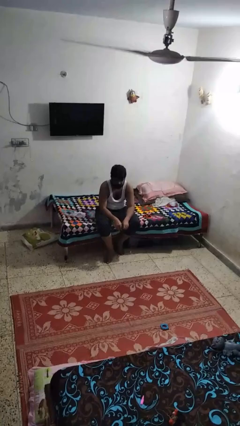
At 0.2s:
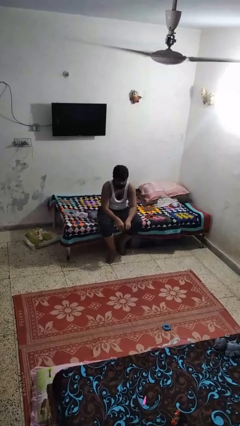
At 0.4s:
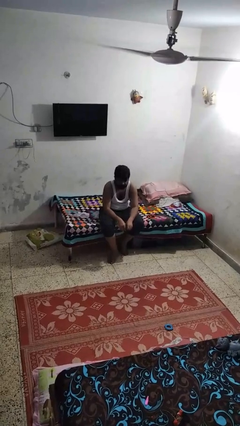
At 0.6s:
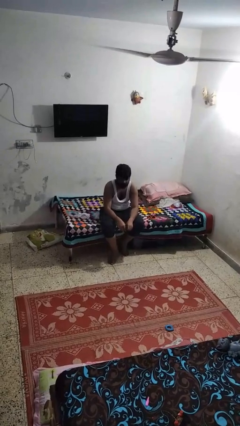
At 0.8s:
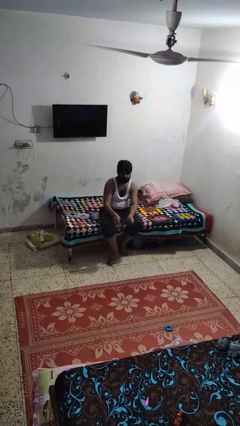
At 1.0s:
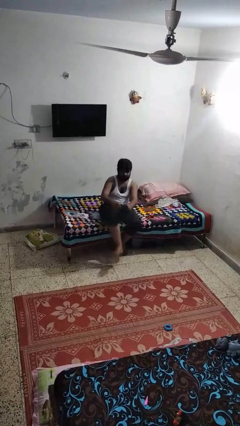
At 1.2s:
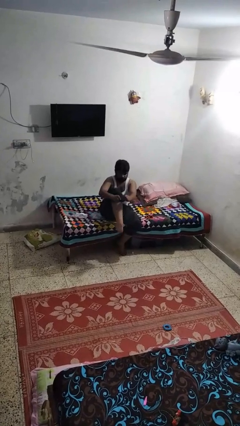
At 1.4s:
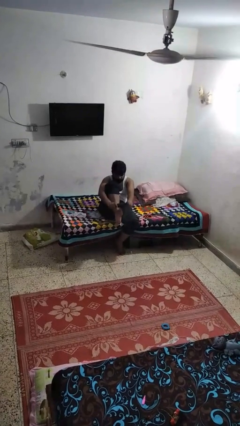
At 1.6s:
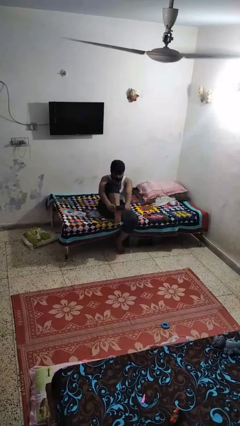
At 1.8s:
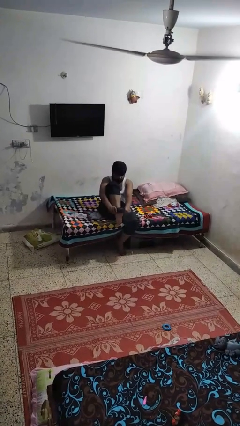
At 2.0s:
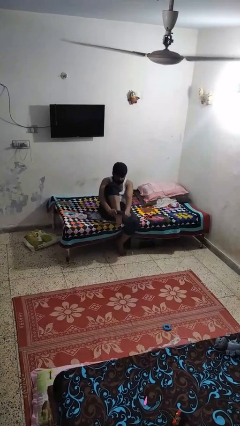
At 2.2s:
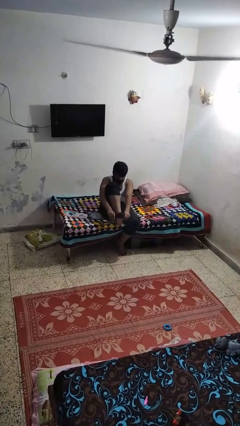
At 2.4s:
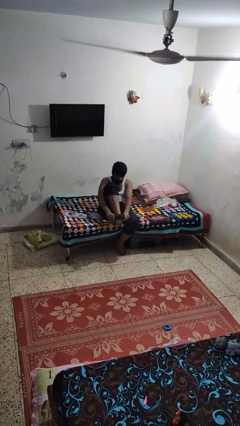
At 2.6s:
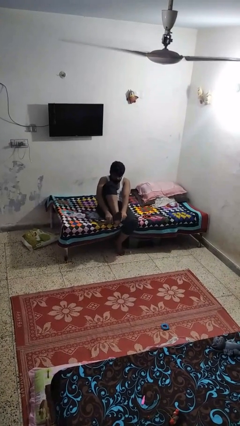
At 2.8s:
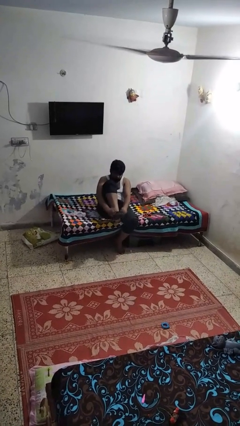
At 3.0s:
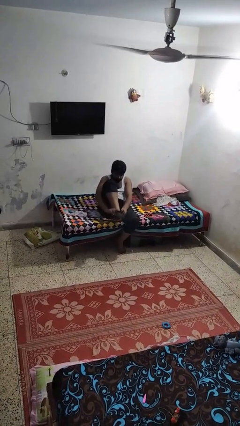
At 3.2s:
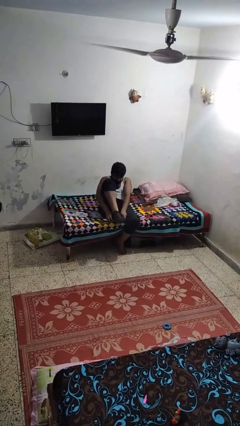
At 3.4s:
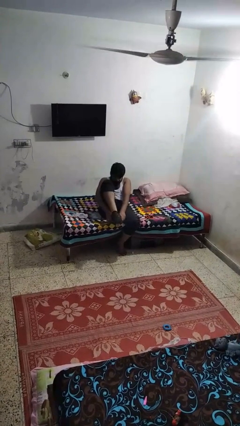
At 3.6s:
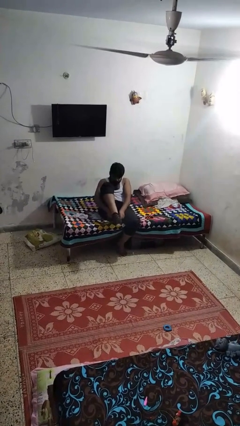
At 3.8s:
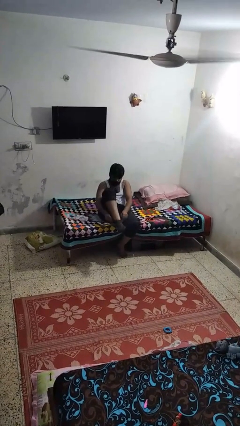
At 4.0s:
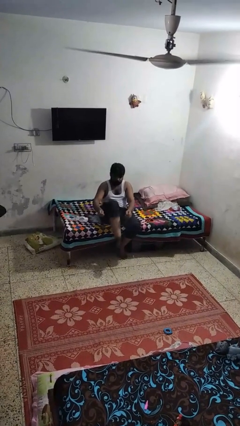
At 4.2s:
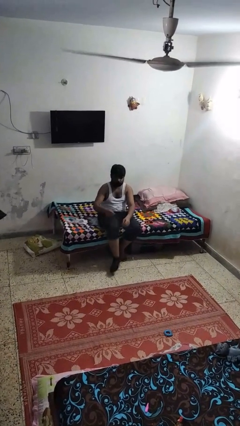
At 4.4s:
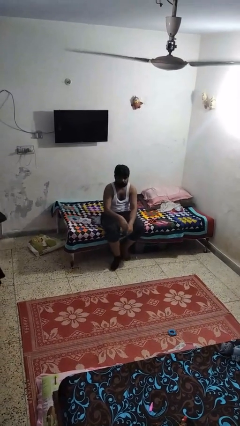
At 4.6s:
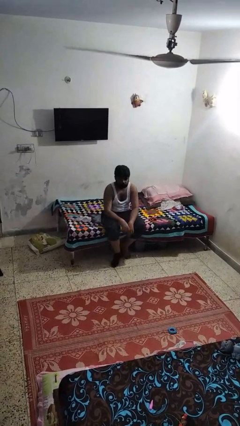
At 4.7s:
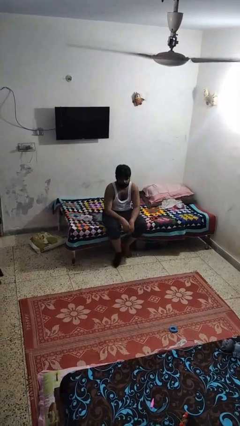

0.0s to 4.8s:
person puts on socks

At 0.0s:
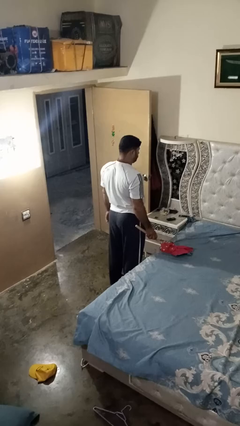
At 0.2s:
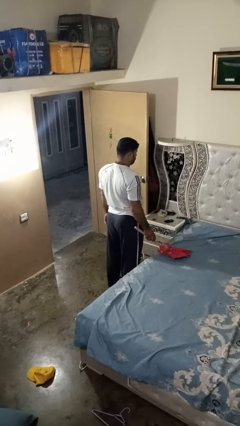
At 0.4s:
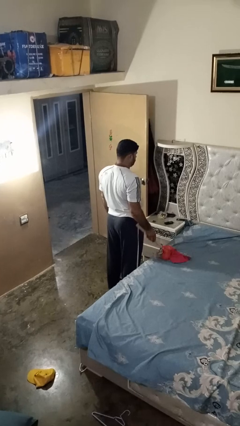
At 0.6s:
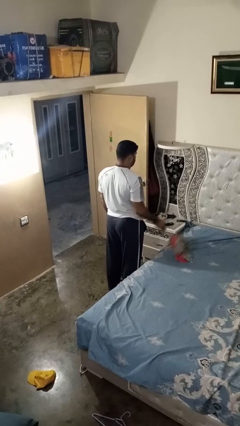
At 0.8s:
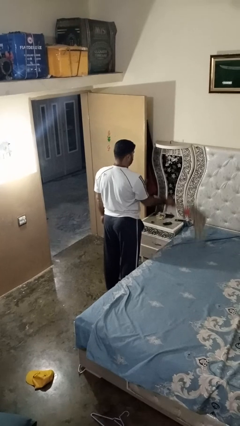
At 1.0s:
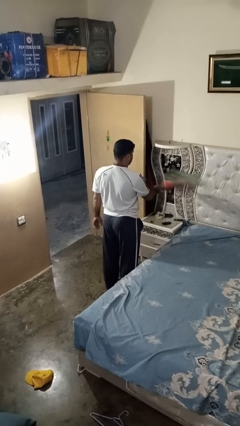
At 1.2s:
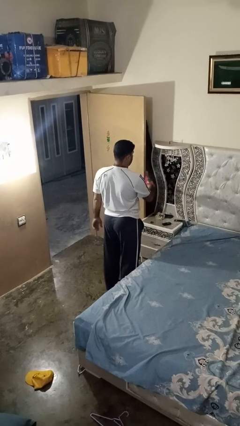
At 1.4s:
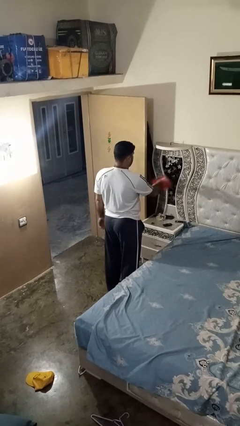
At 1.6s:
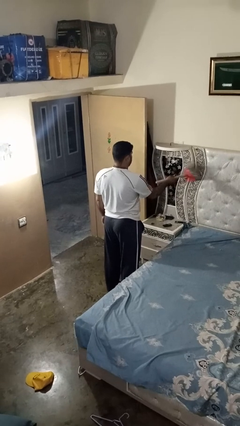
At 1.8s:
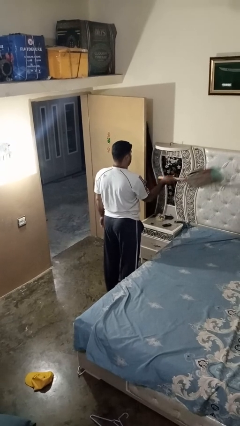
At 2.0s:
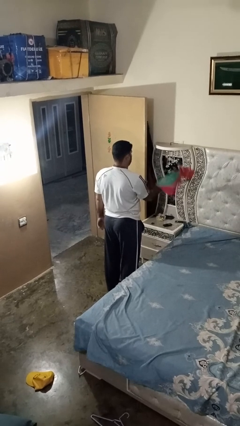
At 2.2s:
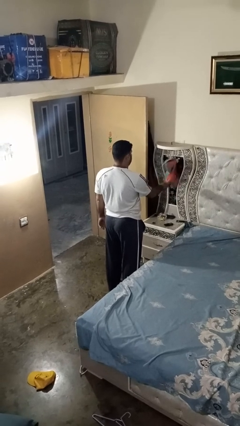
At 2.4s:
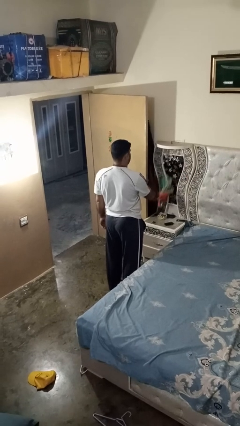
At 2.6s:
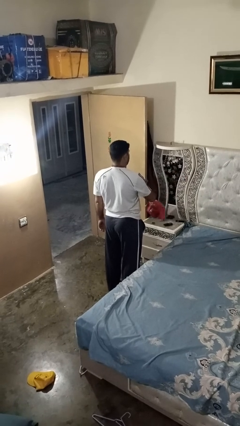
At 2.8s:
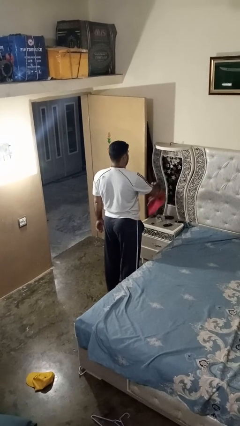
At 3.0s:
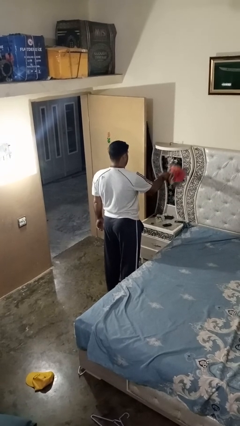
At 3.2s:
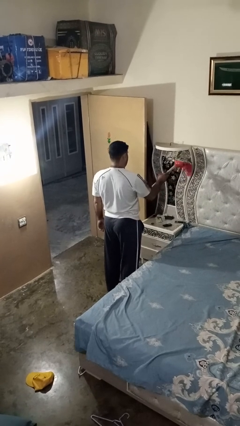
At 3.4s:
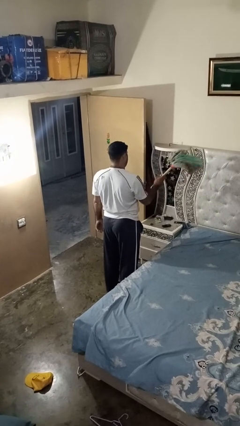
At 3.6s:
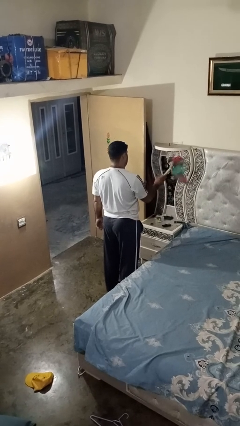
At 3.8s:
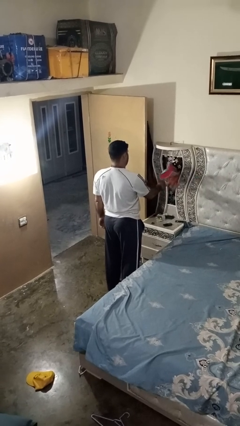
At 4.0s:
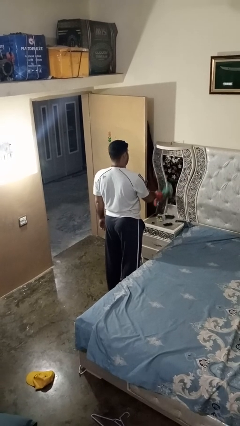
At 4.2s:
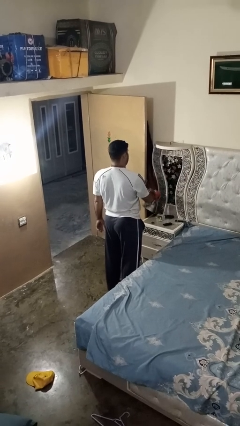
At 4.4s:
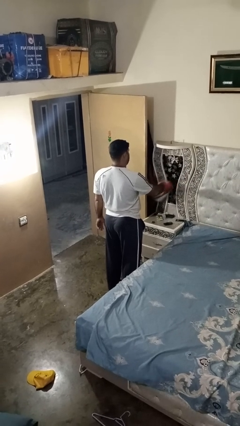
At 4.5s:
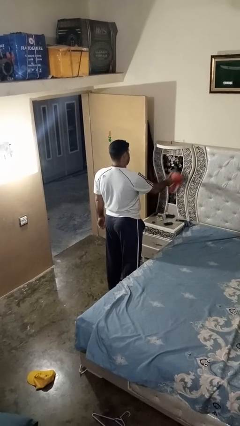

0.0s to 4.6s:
person dusts furniture

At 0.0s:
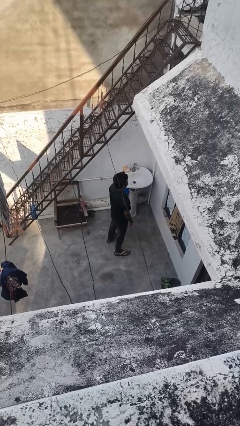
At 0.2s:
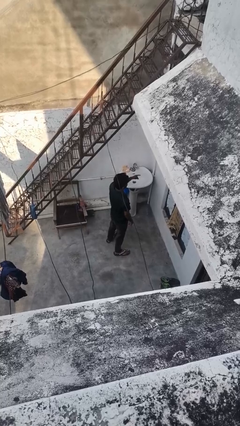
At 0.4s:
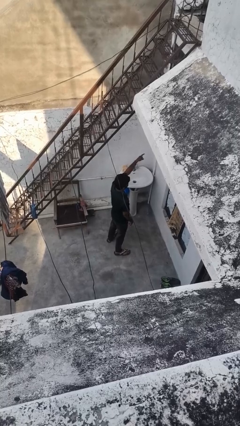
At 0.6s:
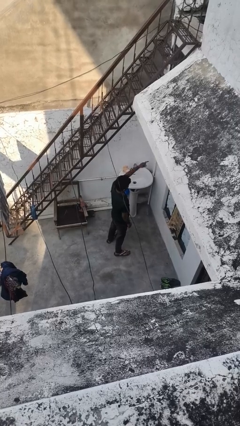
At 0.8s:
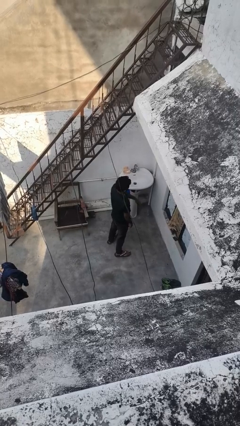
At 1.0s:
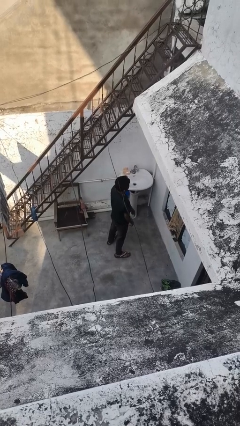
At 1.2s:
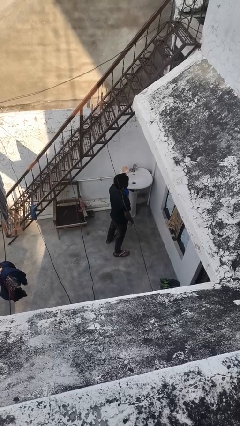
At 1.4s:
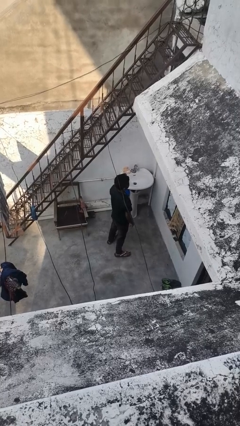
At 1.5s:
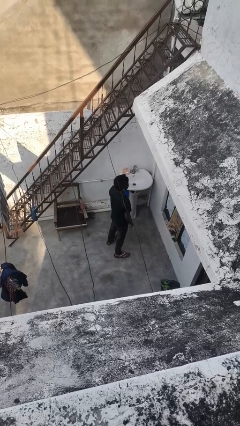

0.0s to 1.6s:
person gestures behind me

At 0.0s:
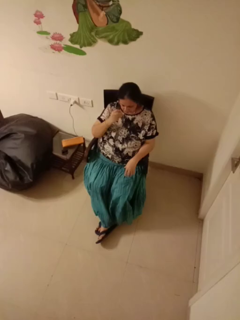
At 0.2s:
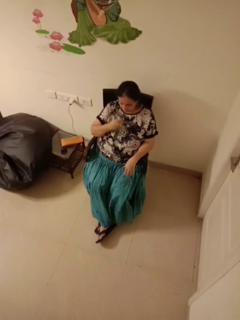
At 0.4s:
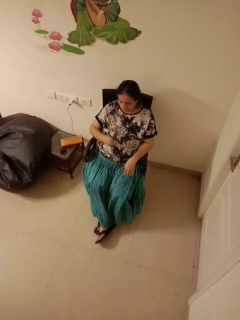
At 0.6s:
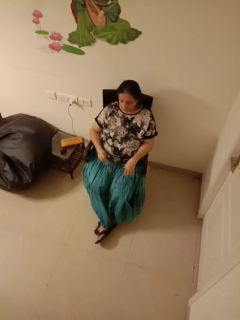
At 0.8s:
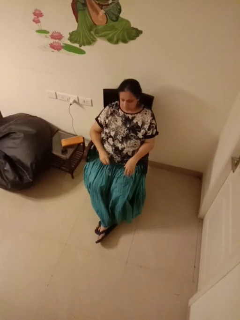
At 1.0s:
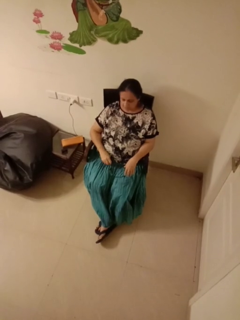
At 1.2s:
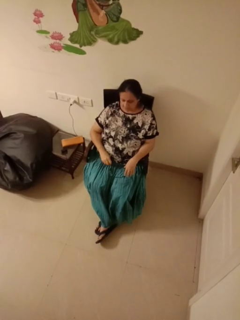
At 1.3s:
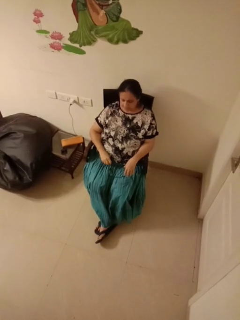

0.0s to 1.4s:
person takes off glasses

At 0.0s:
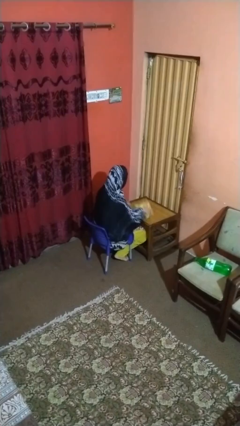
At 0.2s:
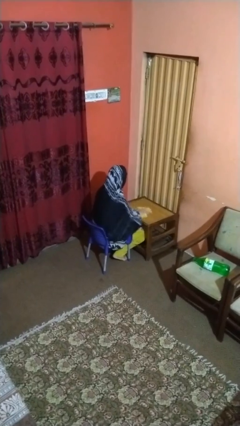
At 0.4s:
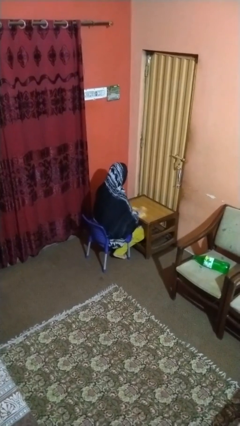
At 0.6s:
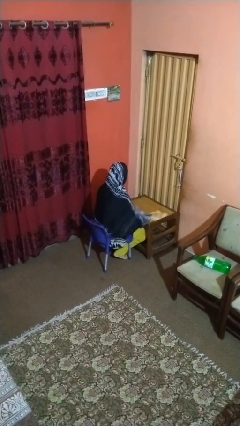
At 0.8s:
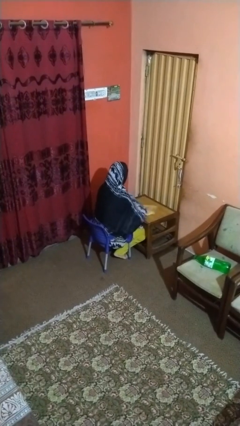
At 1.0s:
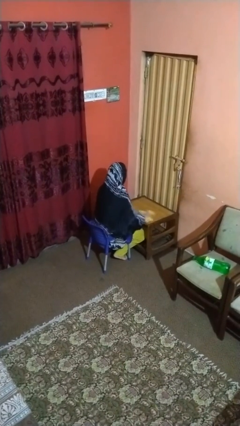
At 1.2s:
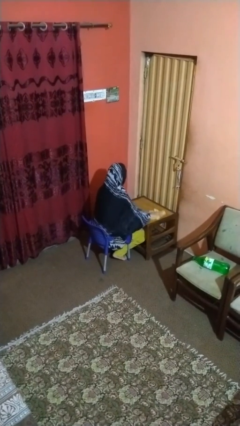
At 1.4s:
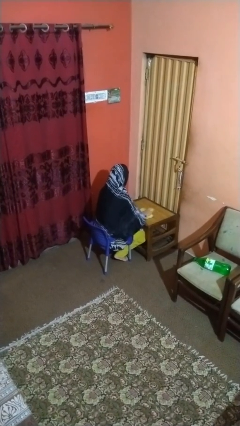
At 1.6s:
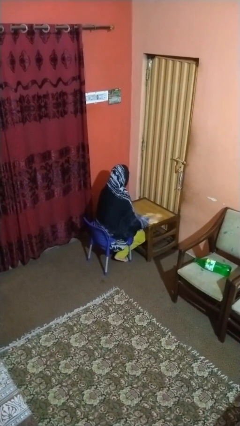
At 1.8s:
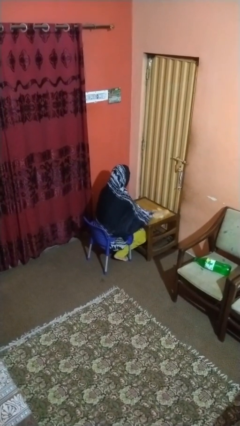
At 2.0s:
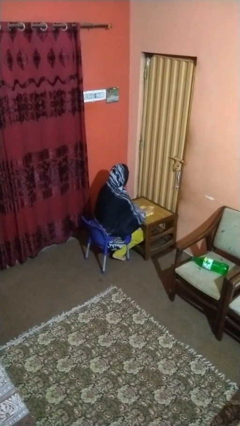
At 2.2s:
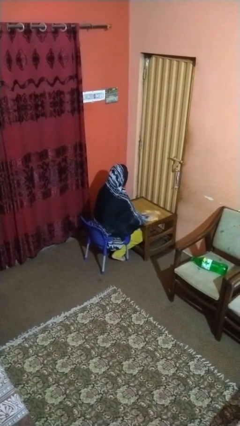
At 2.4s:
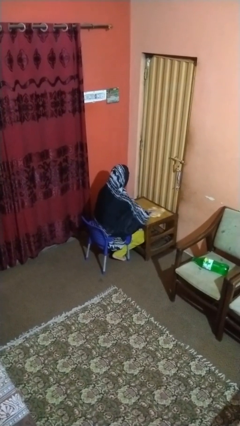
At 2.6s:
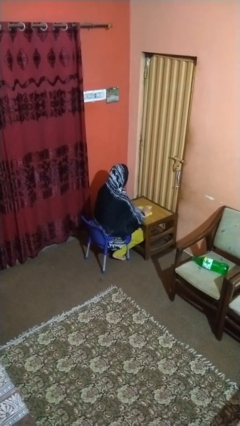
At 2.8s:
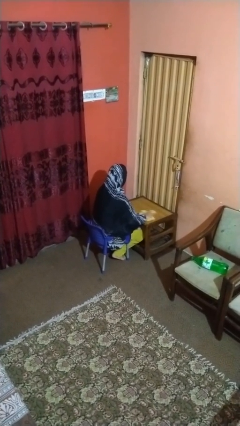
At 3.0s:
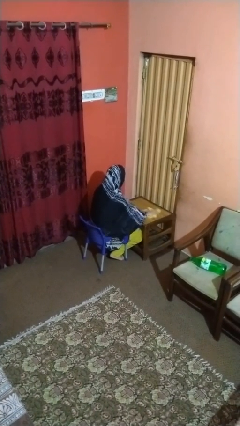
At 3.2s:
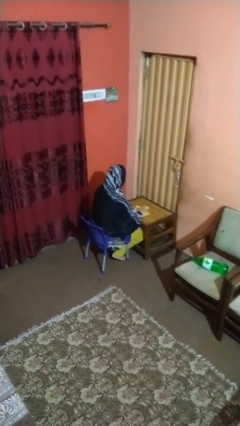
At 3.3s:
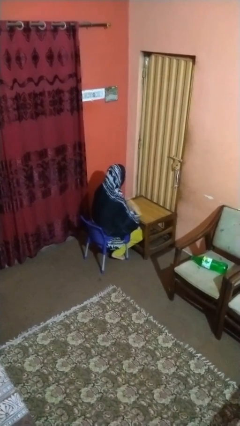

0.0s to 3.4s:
person cleans table with rag

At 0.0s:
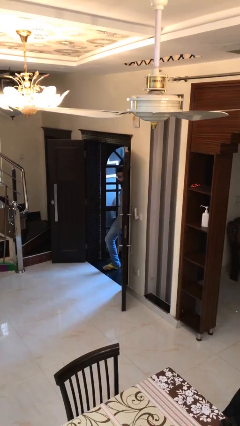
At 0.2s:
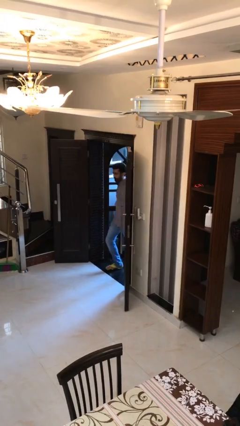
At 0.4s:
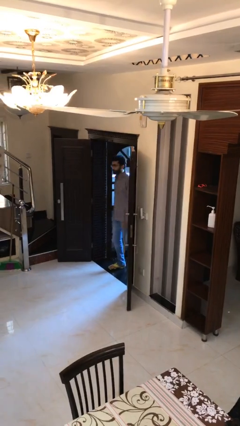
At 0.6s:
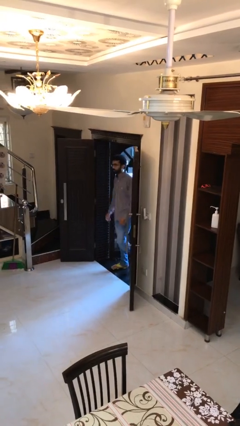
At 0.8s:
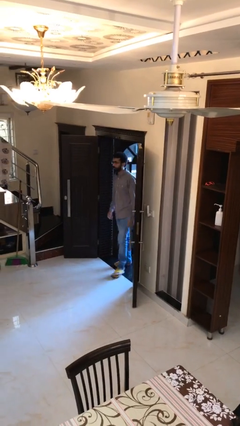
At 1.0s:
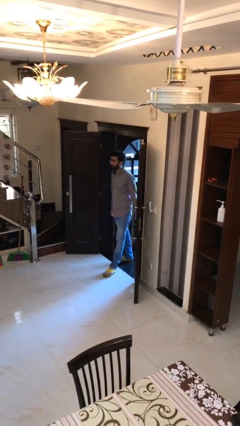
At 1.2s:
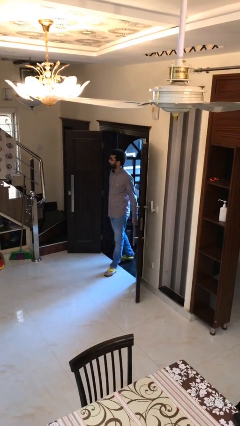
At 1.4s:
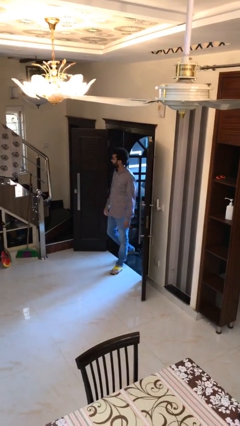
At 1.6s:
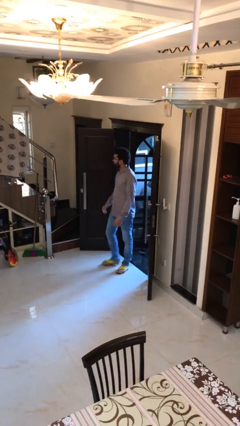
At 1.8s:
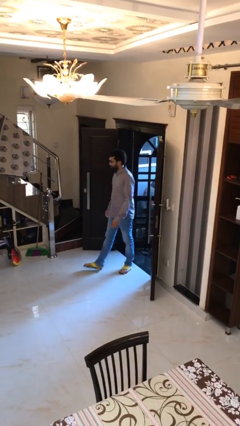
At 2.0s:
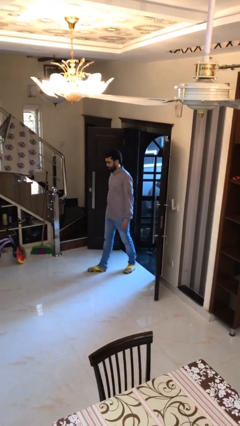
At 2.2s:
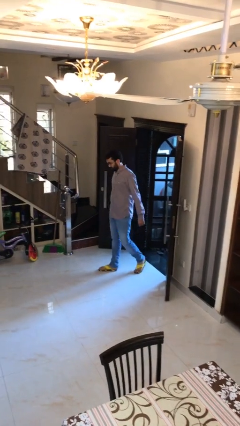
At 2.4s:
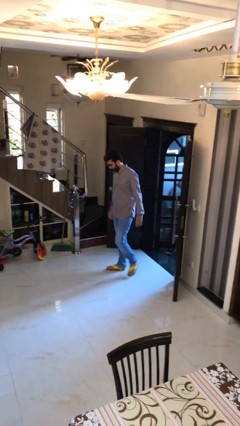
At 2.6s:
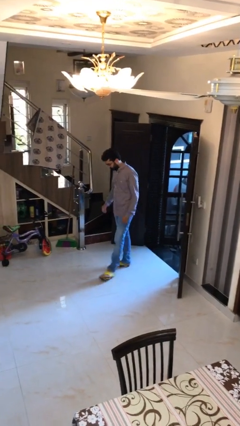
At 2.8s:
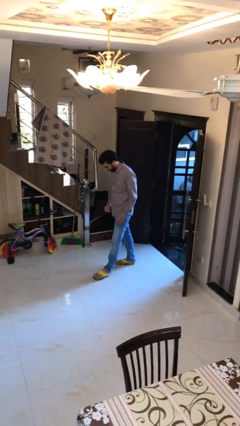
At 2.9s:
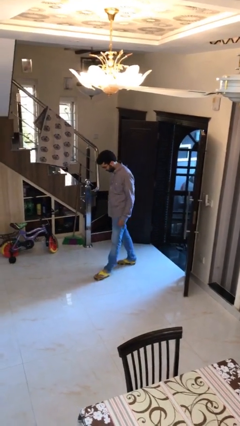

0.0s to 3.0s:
person enters scene through structure
